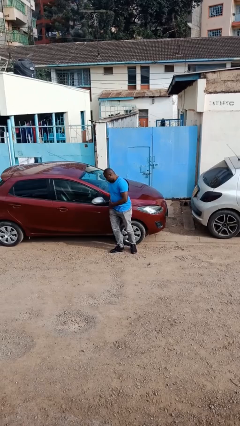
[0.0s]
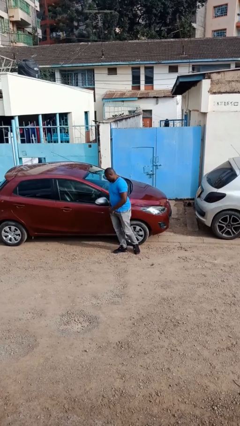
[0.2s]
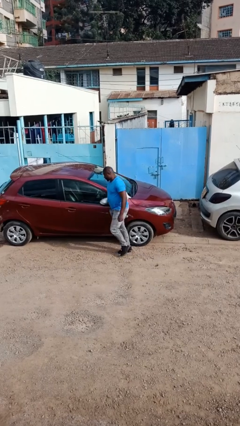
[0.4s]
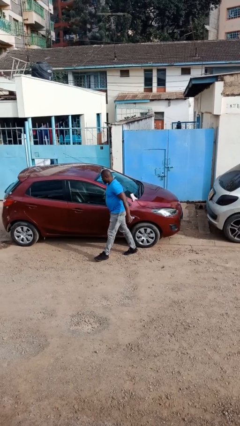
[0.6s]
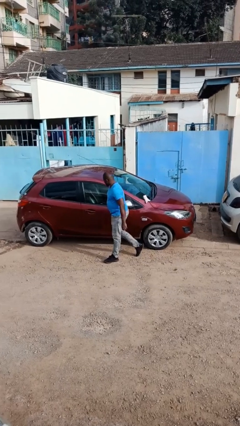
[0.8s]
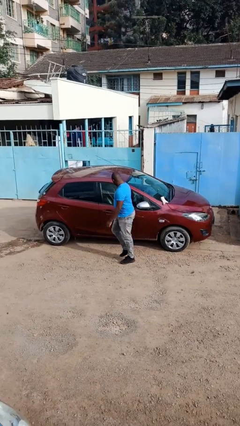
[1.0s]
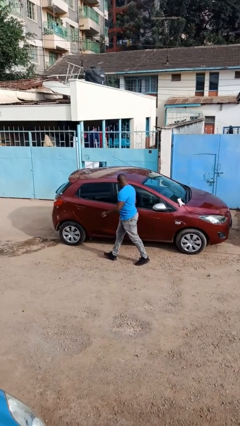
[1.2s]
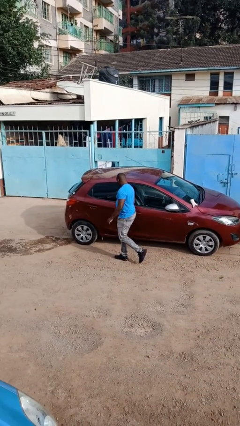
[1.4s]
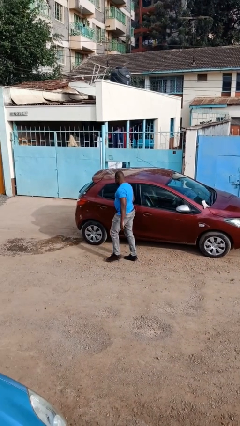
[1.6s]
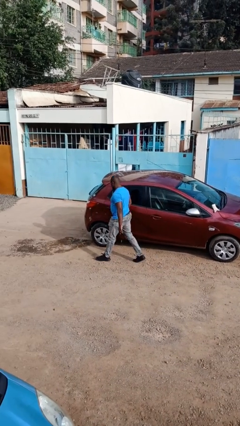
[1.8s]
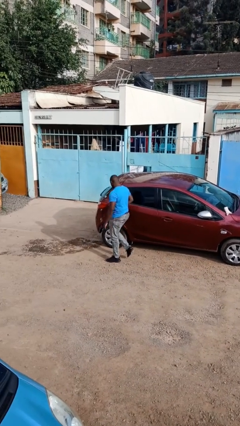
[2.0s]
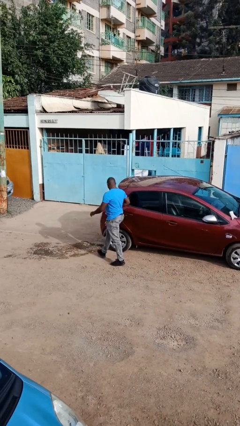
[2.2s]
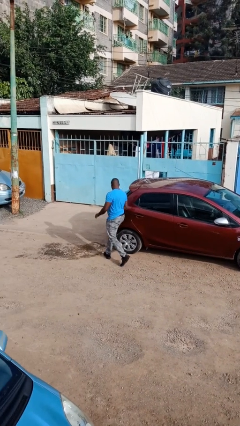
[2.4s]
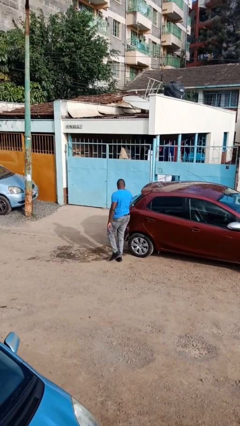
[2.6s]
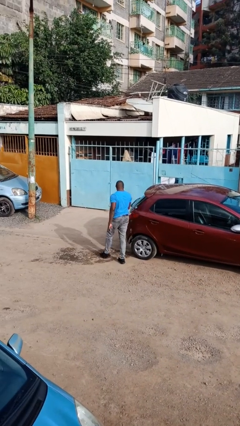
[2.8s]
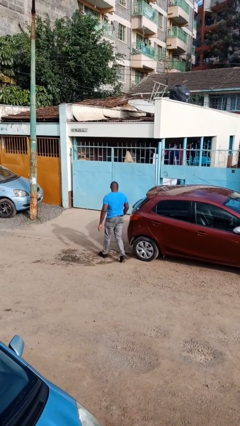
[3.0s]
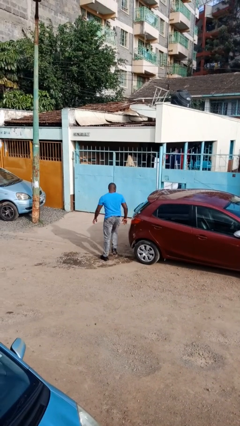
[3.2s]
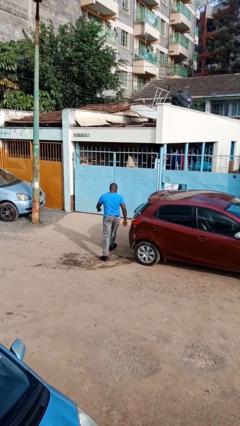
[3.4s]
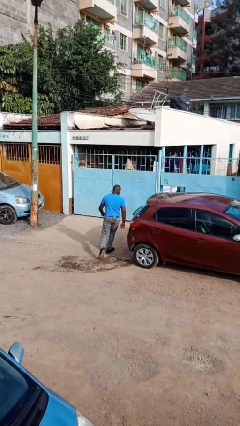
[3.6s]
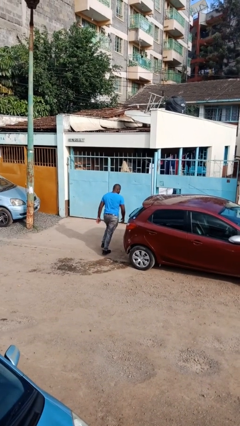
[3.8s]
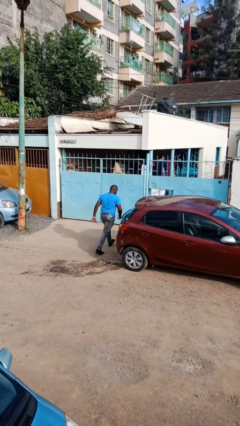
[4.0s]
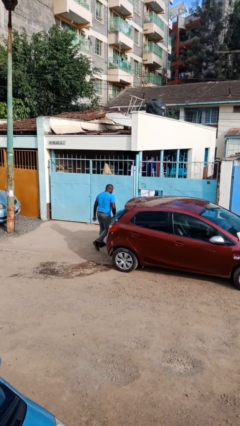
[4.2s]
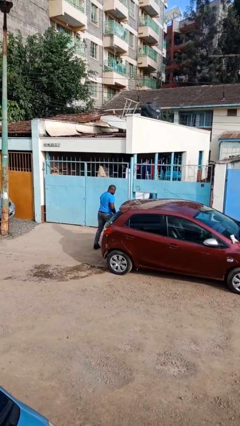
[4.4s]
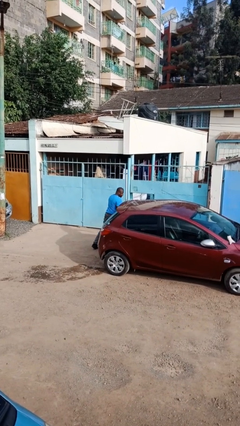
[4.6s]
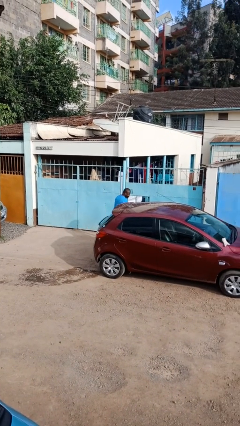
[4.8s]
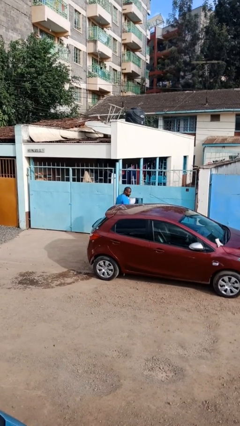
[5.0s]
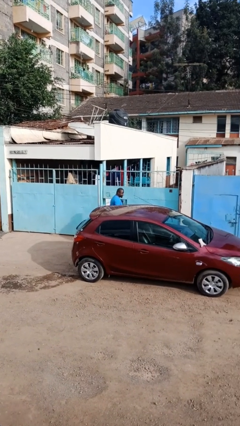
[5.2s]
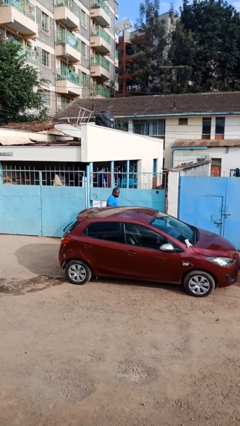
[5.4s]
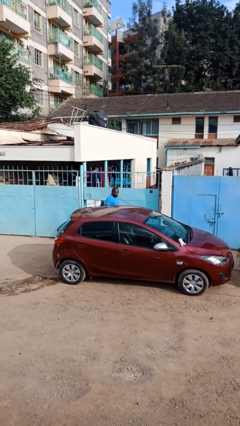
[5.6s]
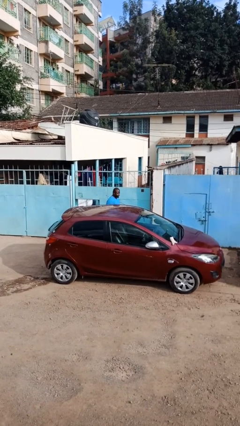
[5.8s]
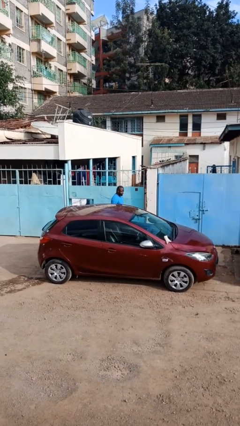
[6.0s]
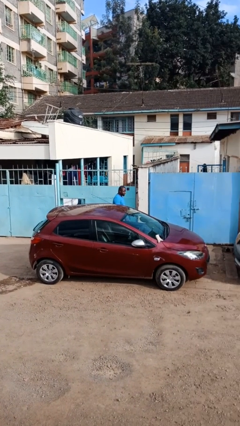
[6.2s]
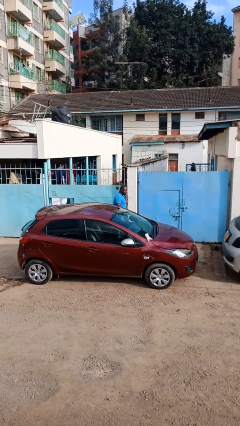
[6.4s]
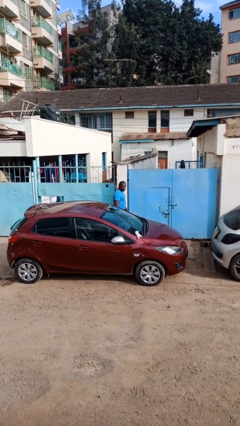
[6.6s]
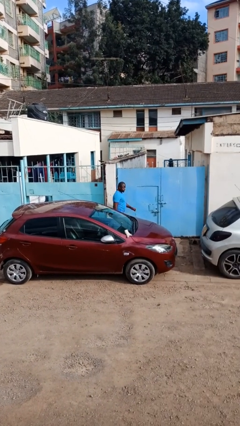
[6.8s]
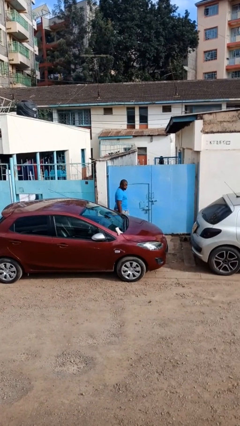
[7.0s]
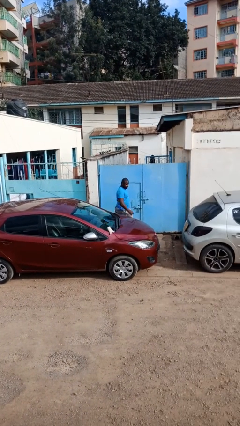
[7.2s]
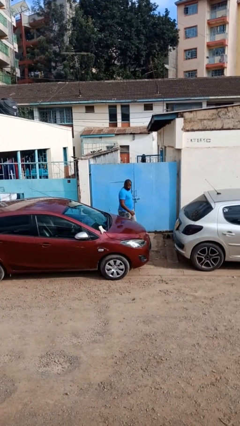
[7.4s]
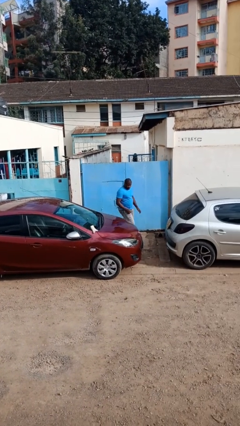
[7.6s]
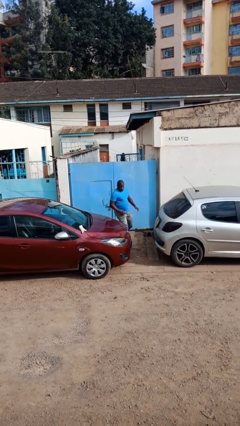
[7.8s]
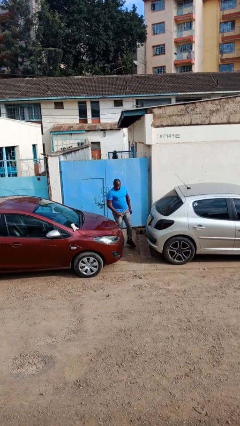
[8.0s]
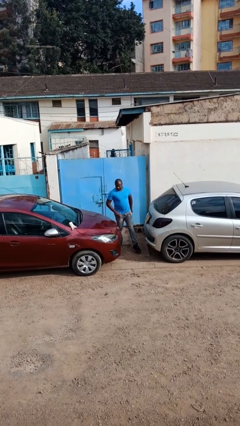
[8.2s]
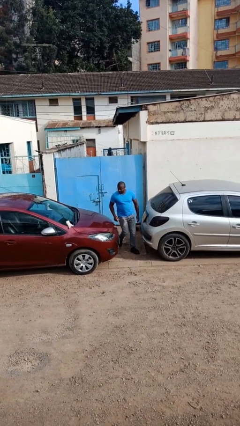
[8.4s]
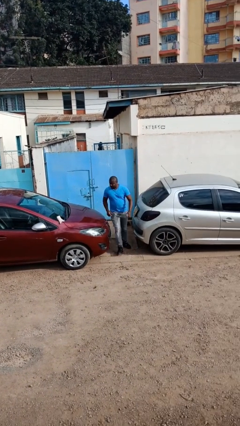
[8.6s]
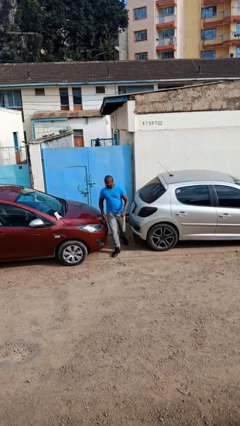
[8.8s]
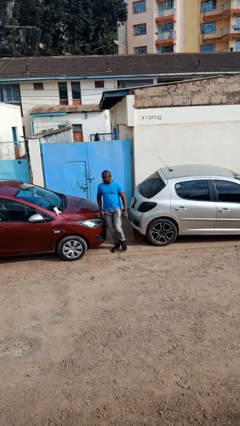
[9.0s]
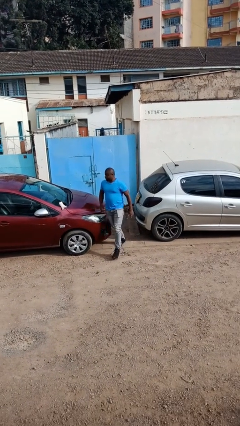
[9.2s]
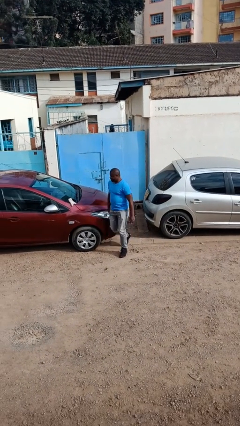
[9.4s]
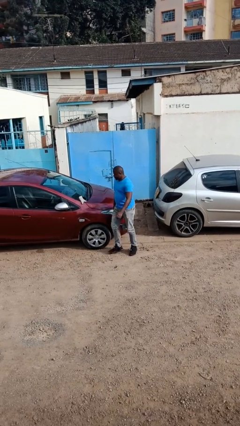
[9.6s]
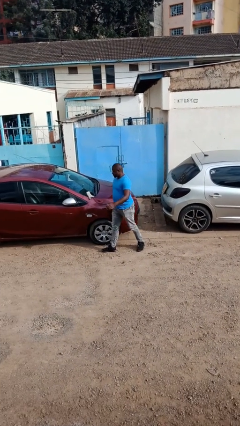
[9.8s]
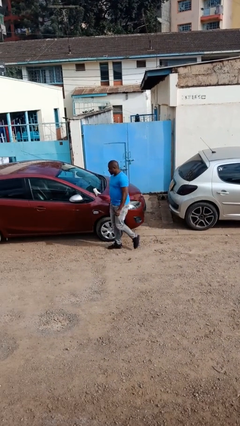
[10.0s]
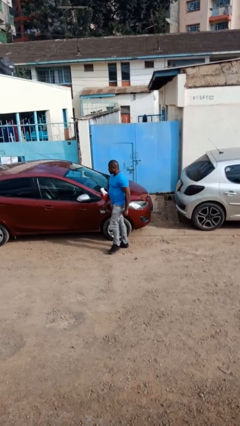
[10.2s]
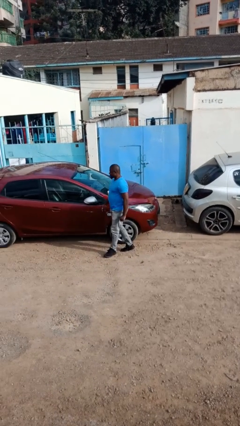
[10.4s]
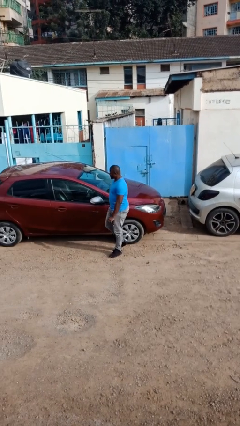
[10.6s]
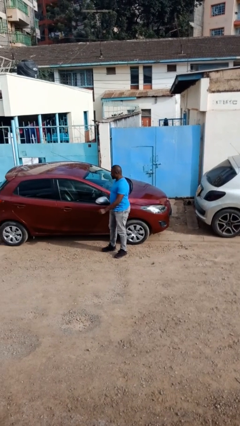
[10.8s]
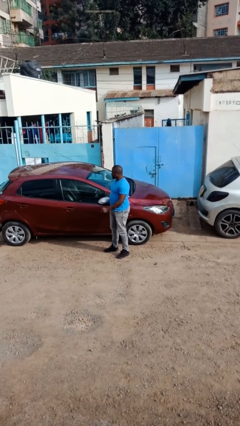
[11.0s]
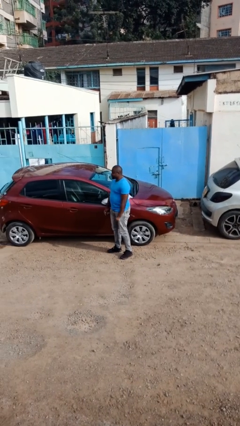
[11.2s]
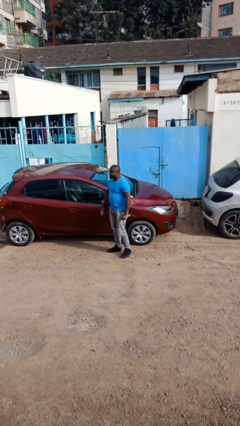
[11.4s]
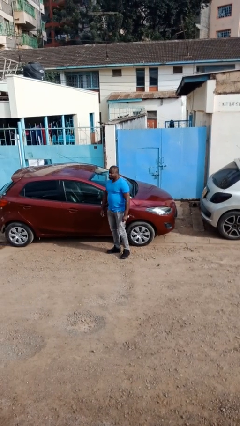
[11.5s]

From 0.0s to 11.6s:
person walks around car

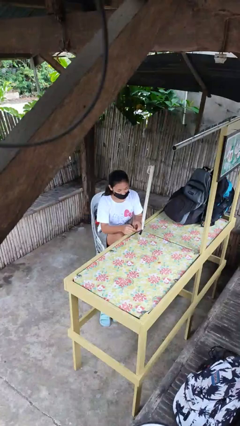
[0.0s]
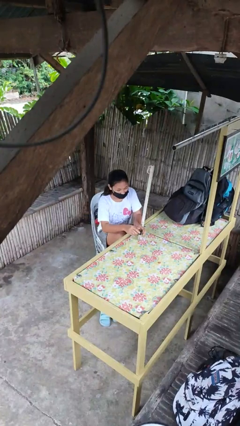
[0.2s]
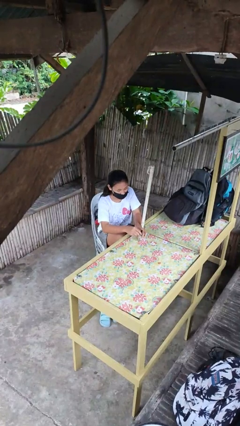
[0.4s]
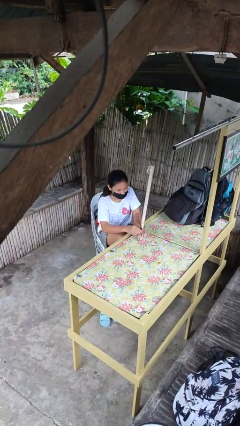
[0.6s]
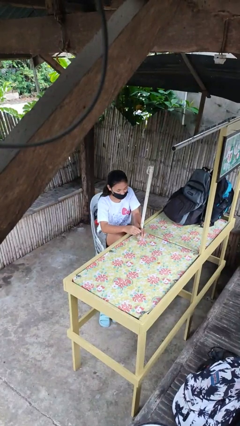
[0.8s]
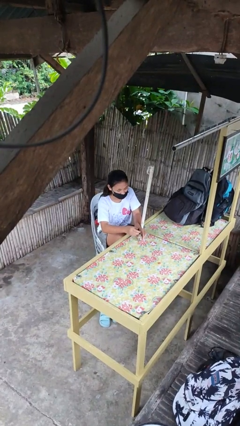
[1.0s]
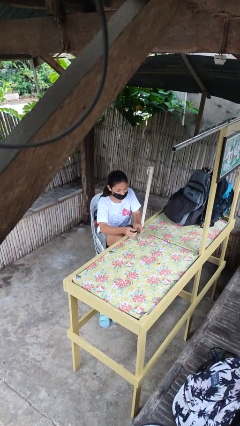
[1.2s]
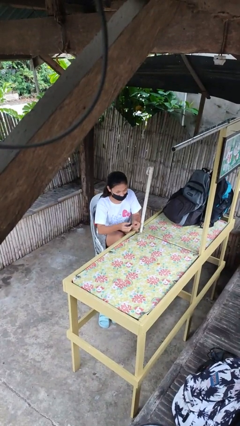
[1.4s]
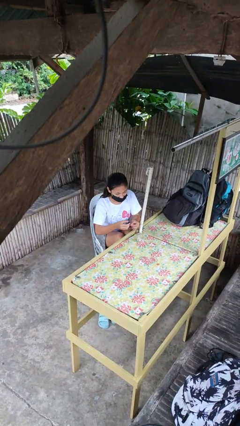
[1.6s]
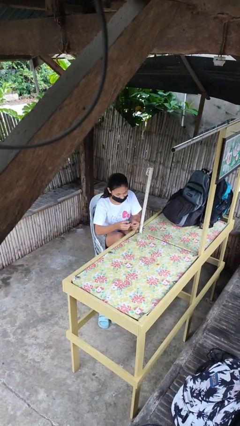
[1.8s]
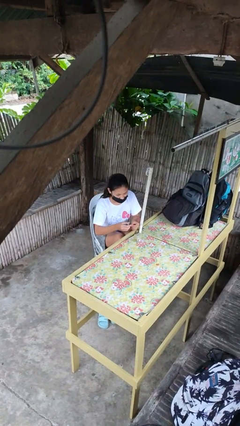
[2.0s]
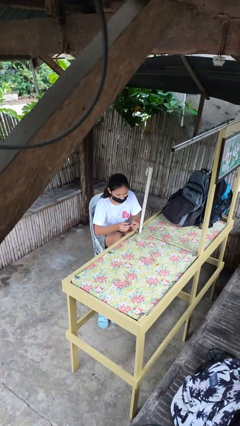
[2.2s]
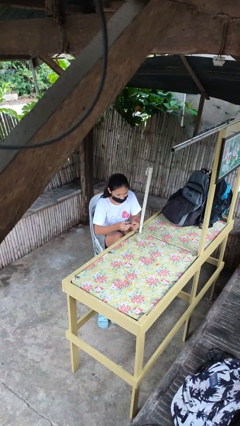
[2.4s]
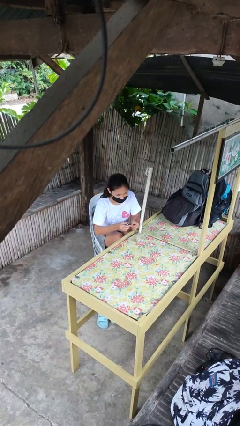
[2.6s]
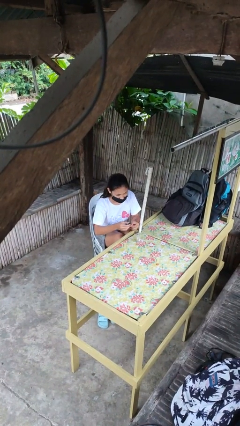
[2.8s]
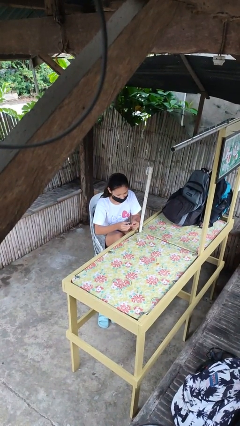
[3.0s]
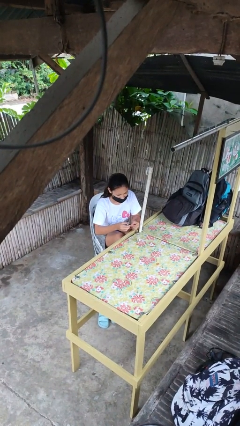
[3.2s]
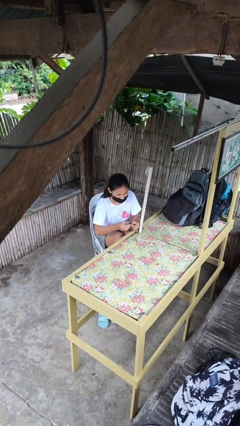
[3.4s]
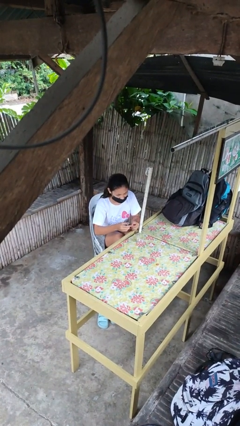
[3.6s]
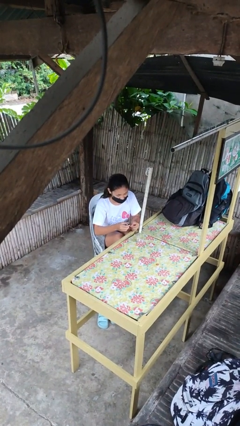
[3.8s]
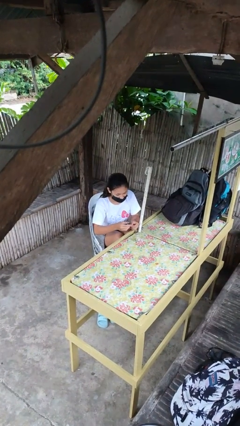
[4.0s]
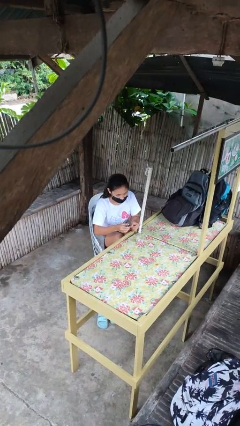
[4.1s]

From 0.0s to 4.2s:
person paints fingernails

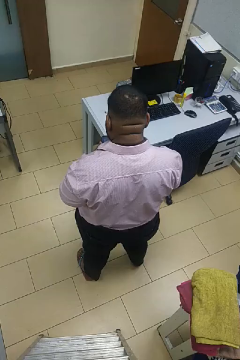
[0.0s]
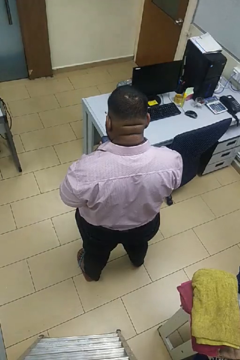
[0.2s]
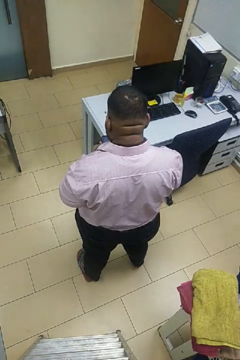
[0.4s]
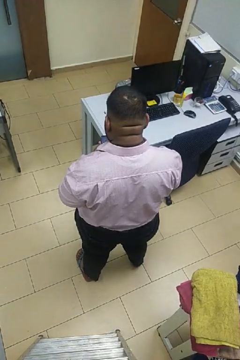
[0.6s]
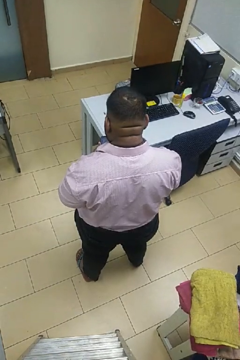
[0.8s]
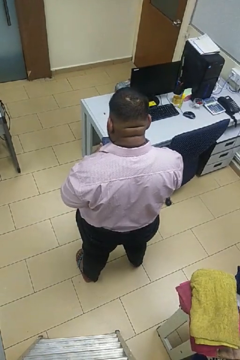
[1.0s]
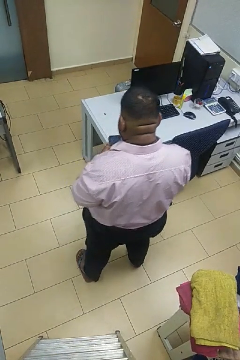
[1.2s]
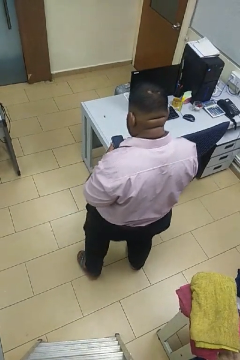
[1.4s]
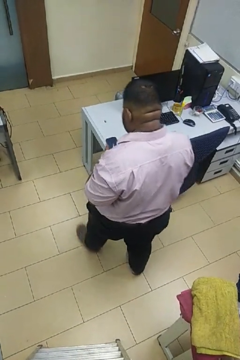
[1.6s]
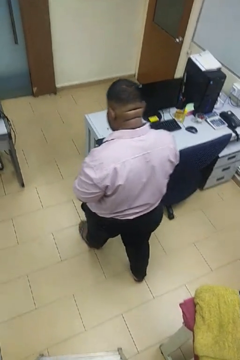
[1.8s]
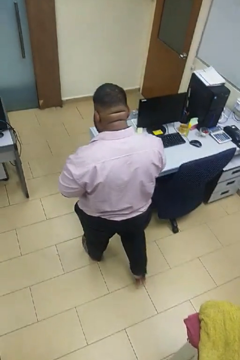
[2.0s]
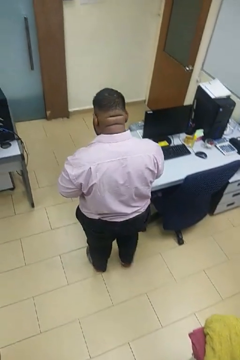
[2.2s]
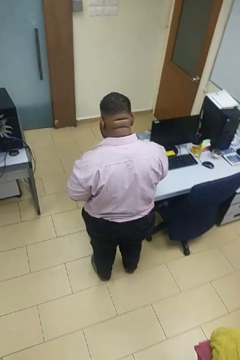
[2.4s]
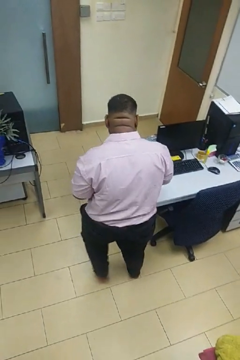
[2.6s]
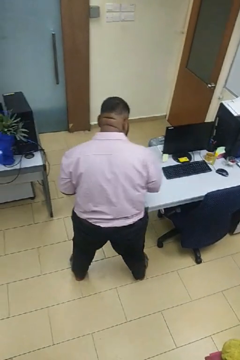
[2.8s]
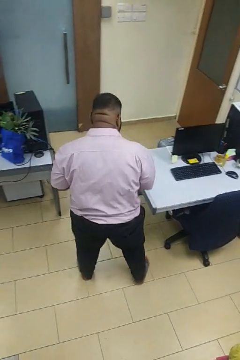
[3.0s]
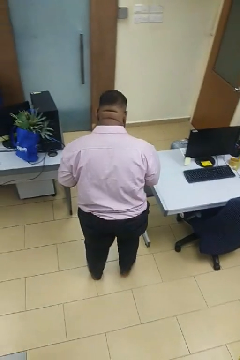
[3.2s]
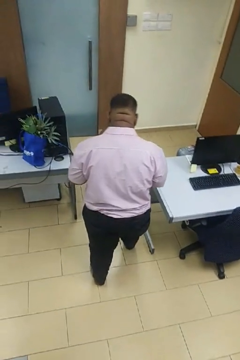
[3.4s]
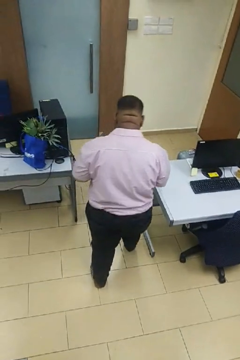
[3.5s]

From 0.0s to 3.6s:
person bumps into table
